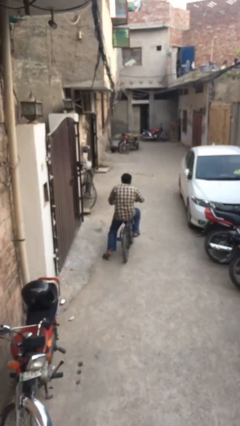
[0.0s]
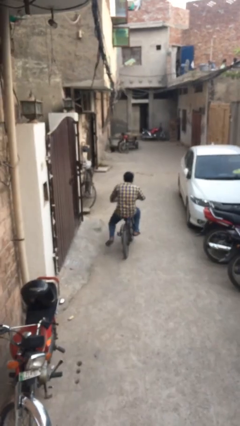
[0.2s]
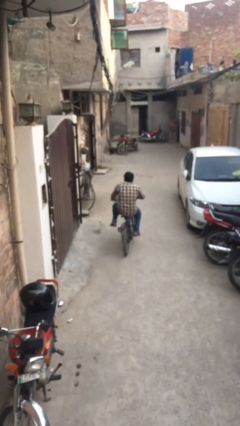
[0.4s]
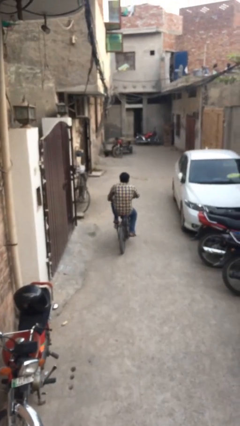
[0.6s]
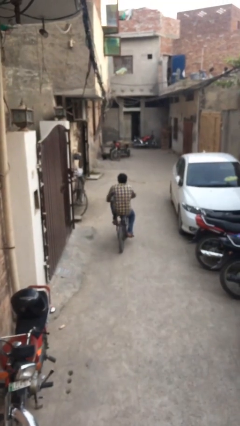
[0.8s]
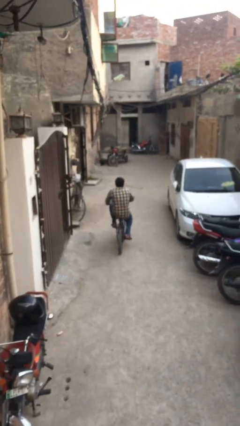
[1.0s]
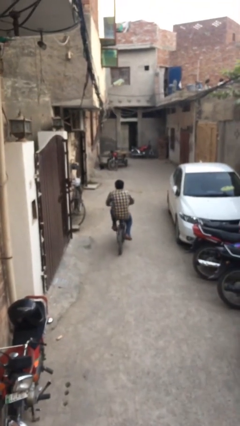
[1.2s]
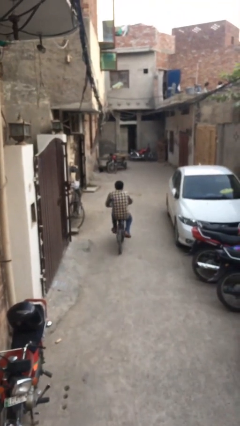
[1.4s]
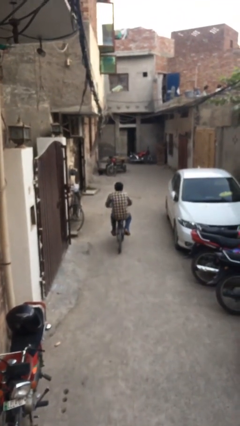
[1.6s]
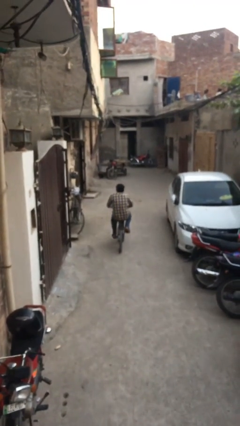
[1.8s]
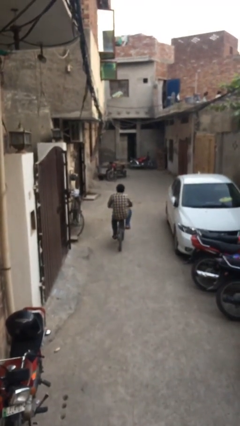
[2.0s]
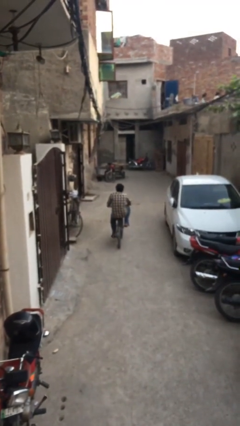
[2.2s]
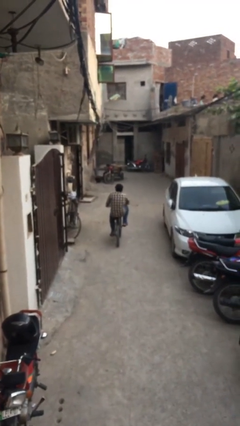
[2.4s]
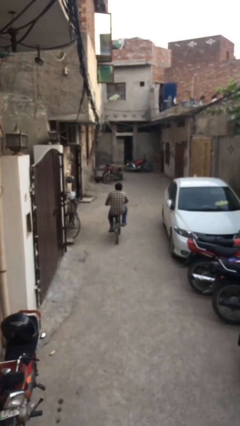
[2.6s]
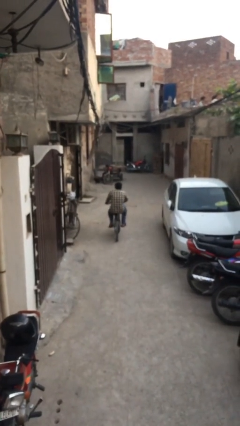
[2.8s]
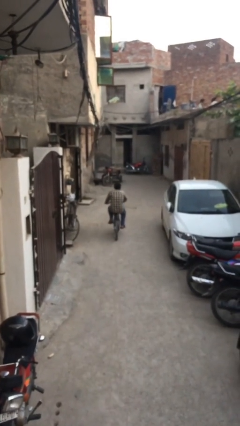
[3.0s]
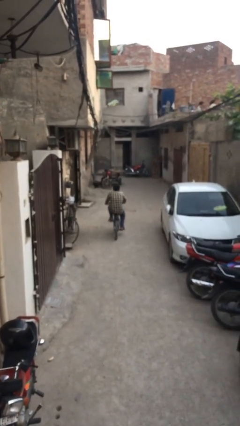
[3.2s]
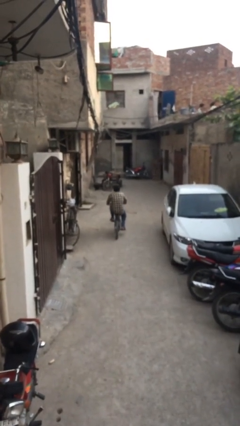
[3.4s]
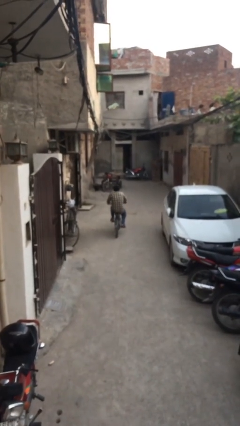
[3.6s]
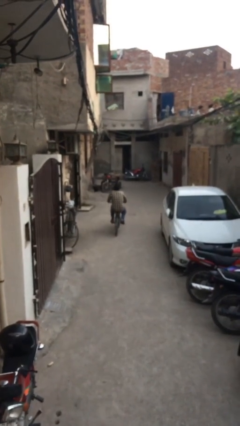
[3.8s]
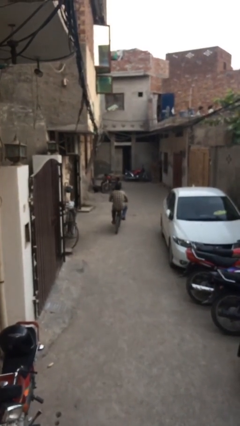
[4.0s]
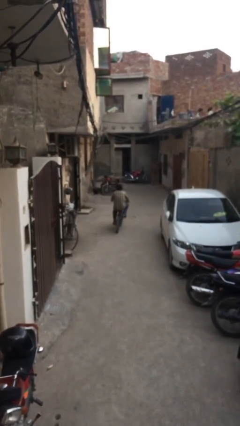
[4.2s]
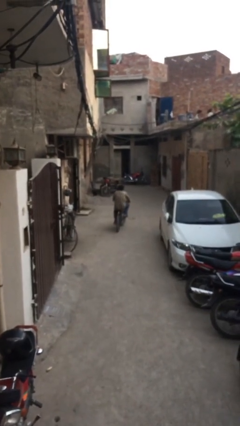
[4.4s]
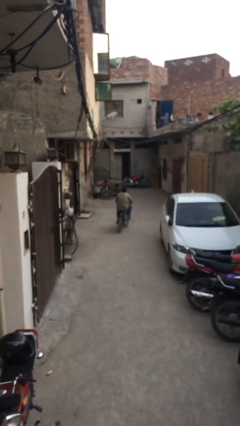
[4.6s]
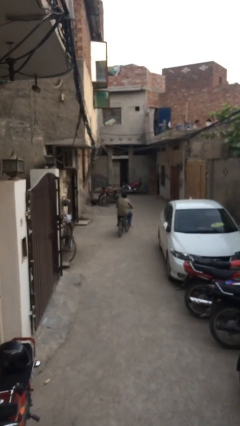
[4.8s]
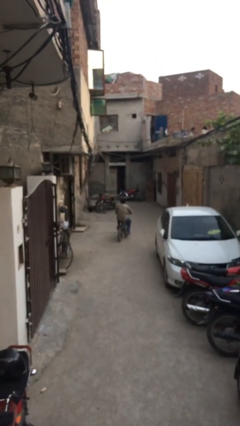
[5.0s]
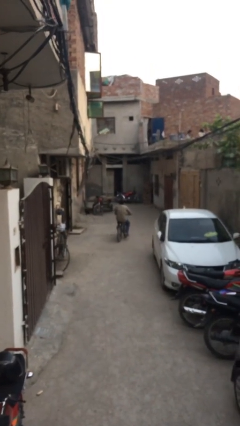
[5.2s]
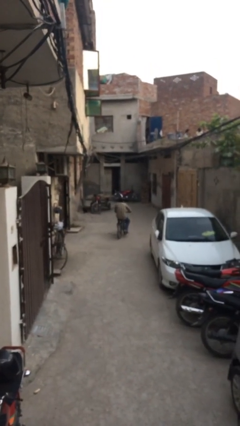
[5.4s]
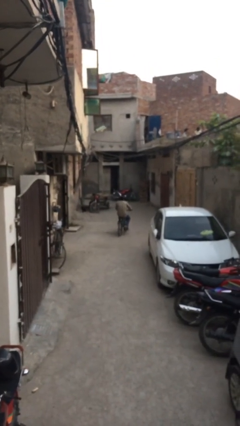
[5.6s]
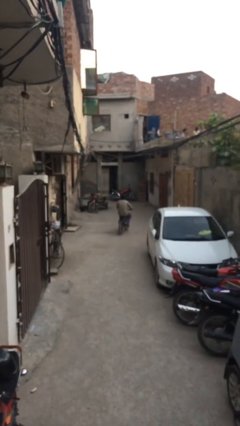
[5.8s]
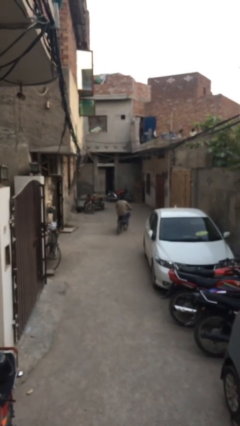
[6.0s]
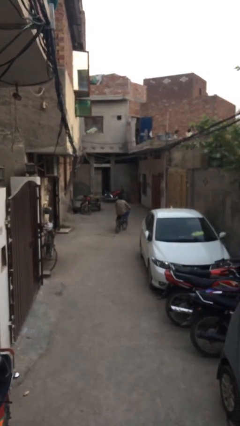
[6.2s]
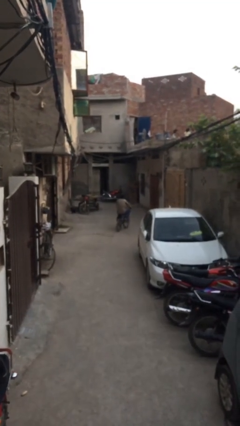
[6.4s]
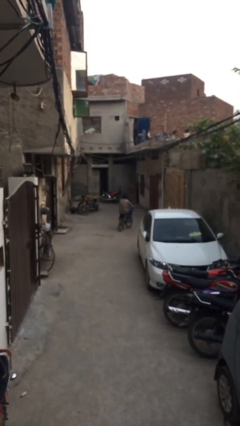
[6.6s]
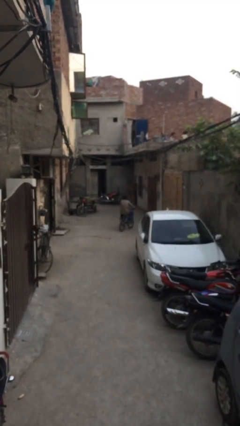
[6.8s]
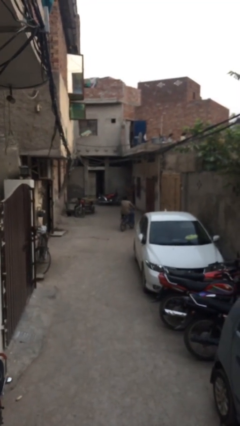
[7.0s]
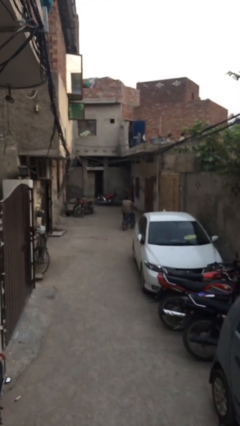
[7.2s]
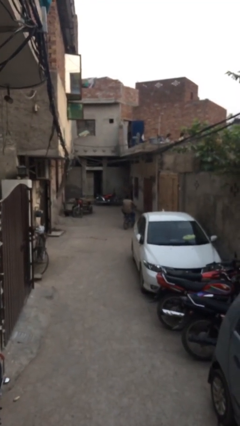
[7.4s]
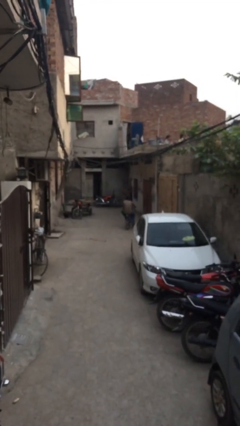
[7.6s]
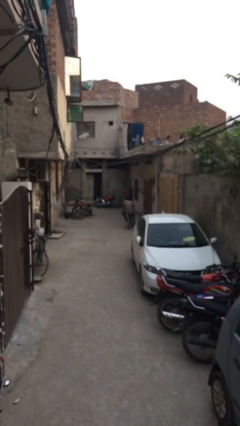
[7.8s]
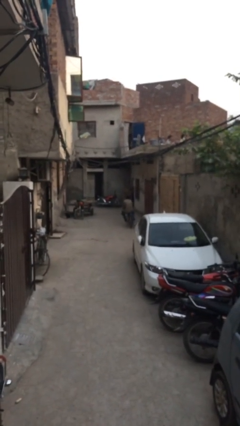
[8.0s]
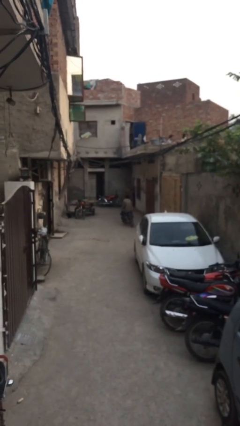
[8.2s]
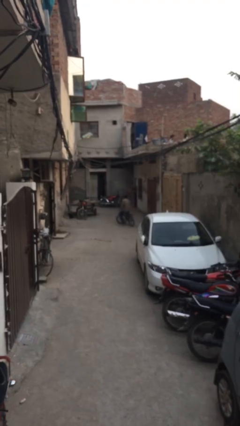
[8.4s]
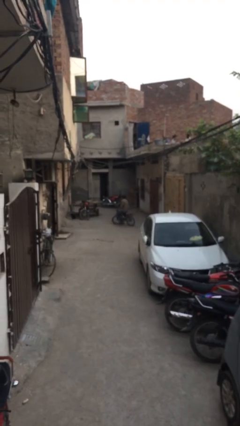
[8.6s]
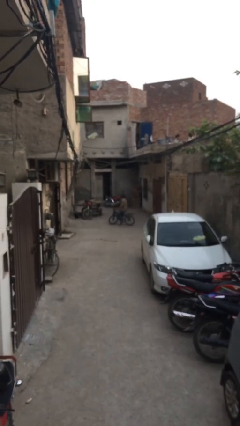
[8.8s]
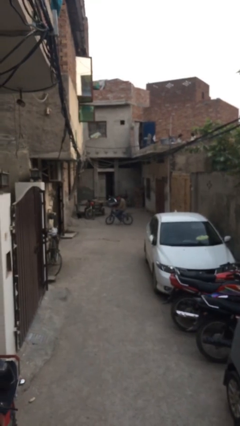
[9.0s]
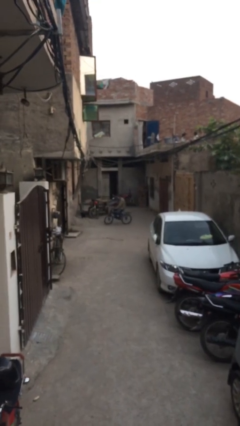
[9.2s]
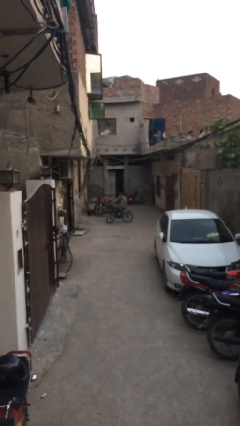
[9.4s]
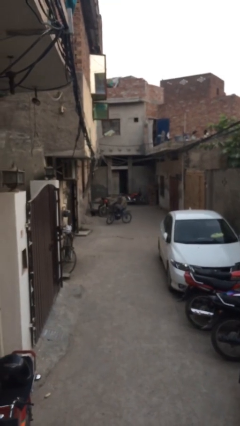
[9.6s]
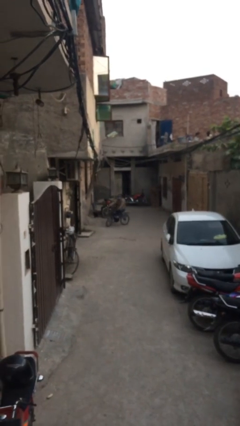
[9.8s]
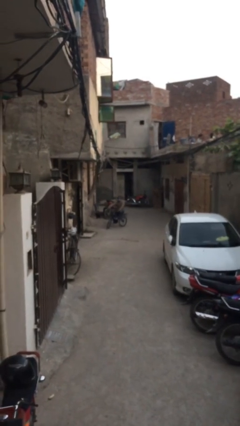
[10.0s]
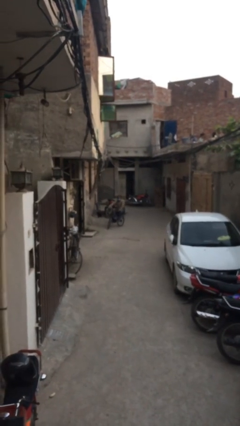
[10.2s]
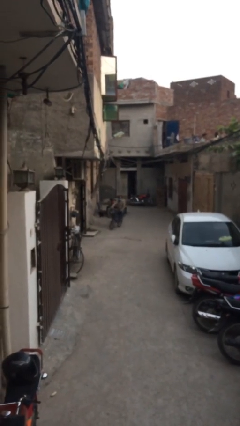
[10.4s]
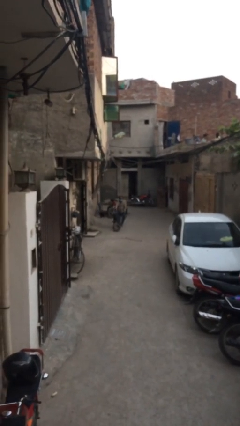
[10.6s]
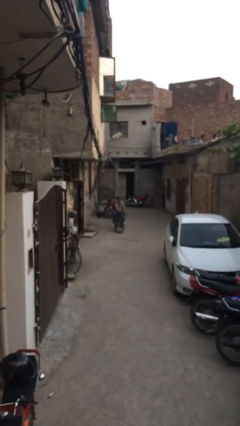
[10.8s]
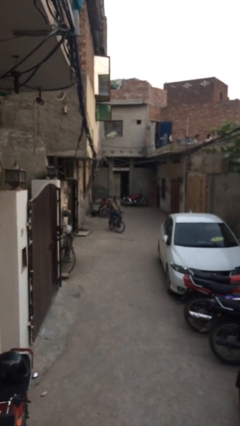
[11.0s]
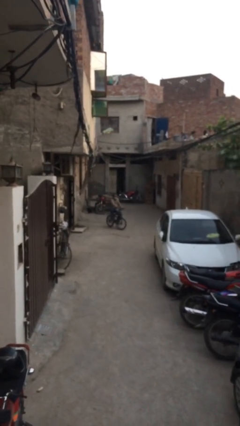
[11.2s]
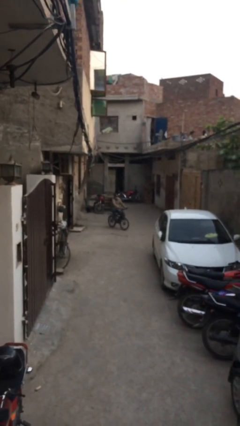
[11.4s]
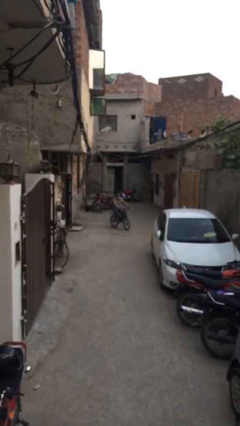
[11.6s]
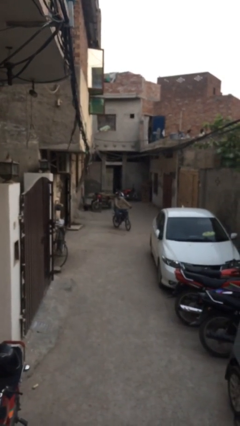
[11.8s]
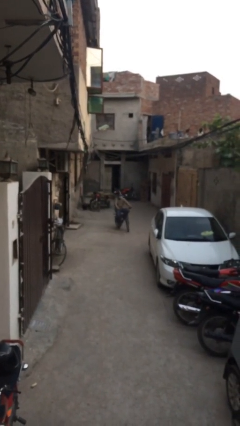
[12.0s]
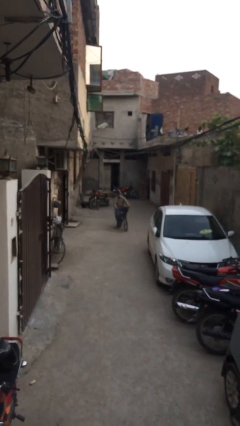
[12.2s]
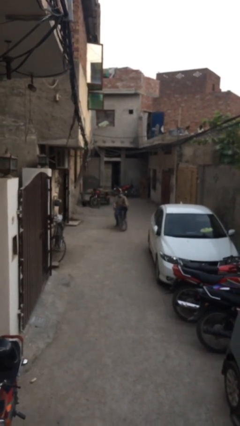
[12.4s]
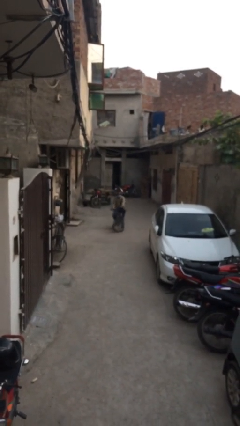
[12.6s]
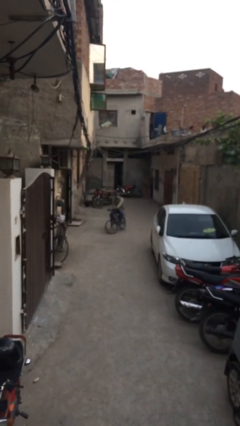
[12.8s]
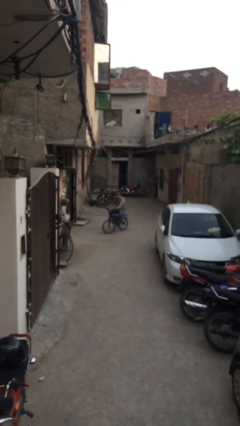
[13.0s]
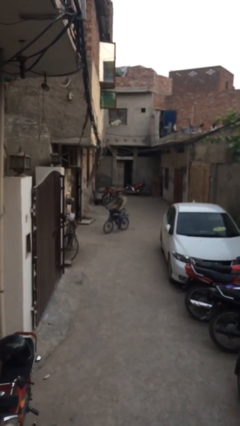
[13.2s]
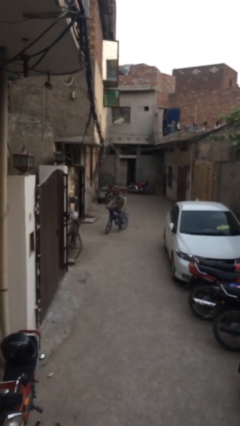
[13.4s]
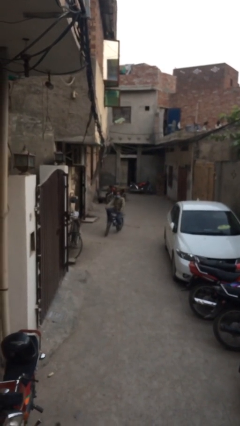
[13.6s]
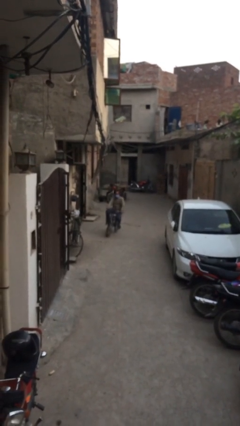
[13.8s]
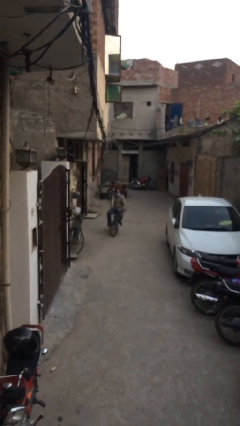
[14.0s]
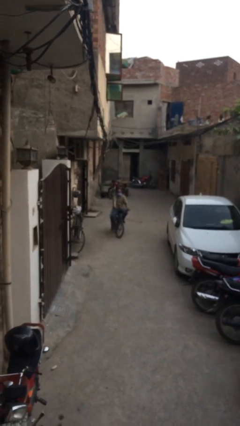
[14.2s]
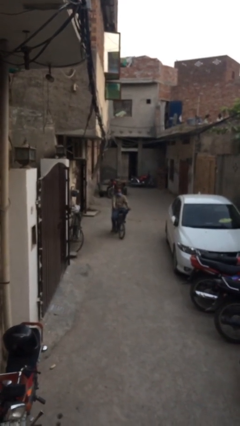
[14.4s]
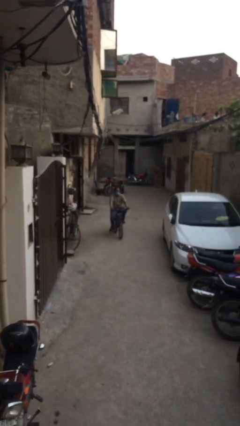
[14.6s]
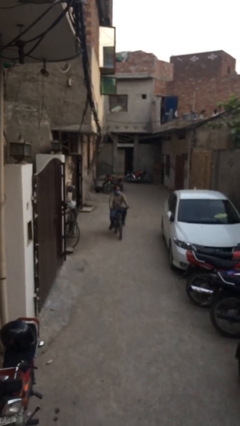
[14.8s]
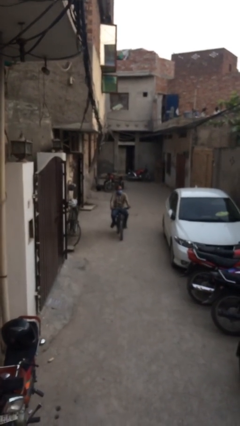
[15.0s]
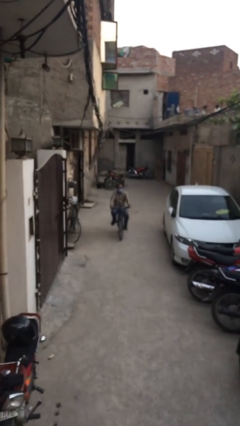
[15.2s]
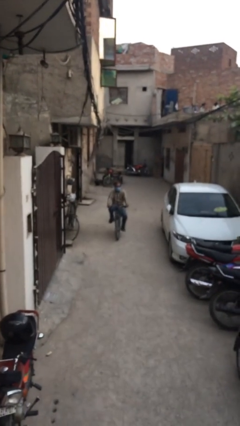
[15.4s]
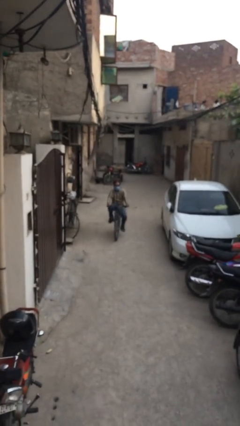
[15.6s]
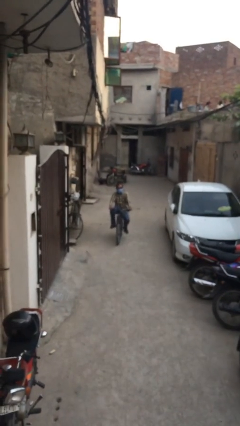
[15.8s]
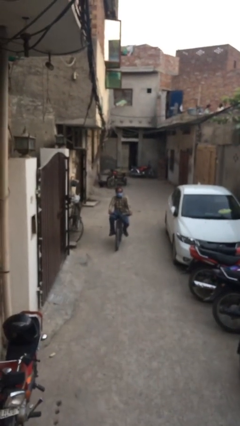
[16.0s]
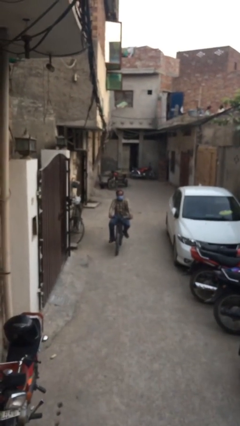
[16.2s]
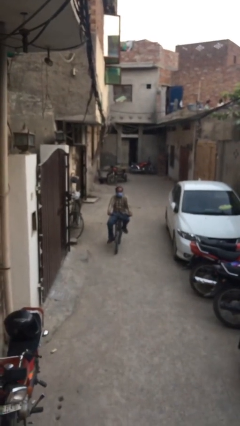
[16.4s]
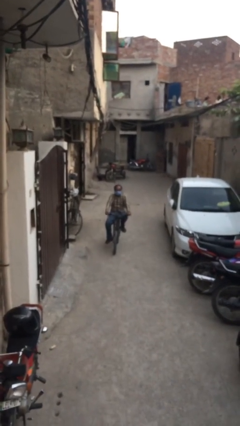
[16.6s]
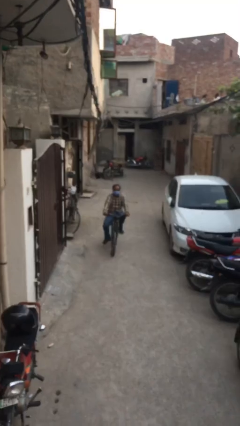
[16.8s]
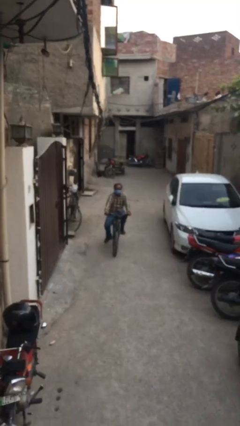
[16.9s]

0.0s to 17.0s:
person rides bicycle

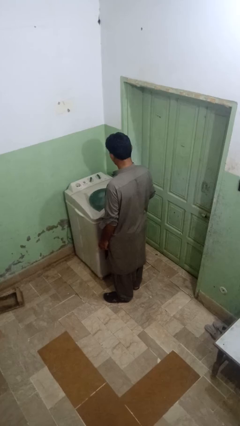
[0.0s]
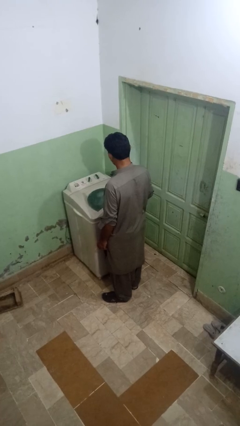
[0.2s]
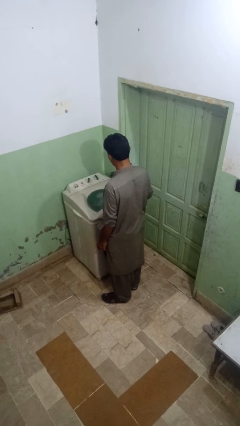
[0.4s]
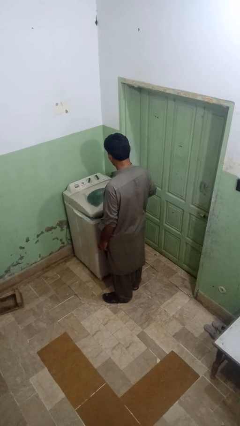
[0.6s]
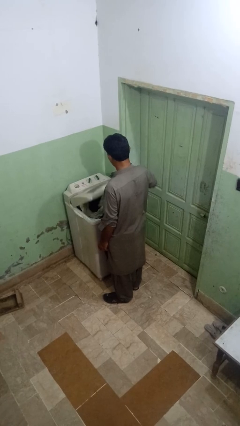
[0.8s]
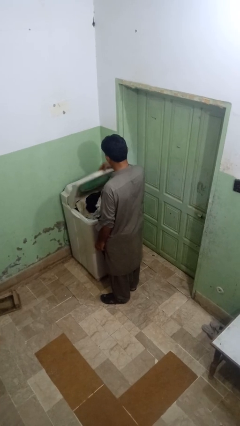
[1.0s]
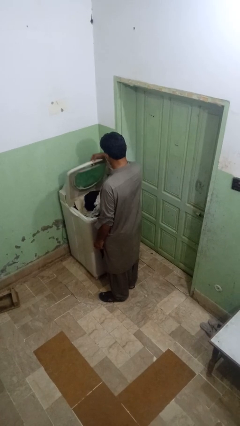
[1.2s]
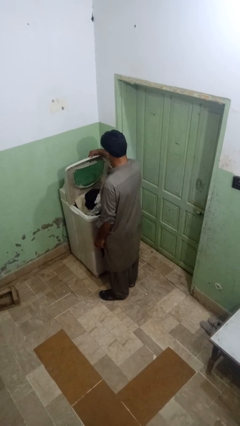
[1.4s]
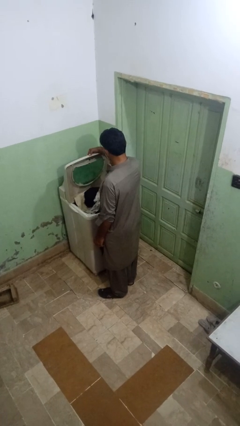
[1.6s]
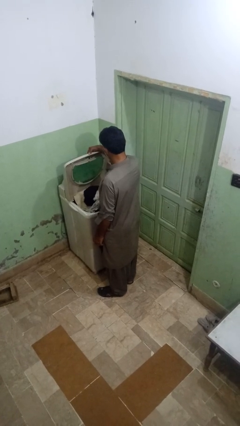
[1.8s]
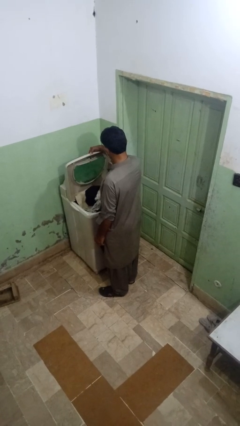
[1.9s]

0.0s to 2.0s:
person opens clothes washer
